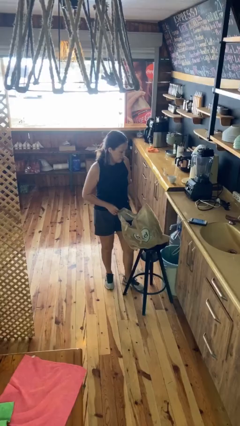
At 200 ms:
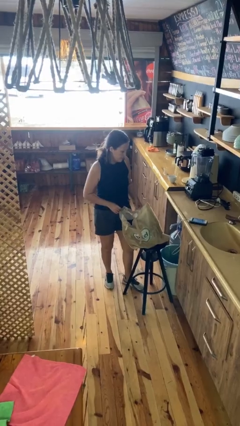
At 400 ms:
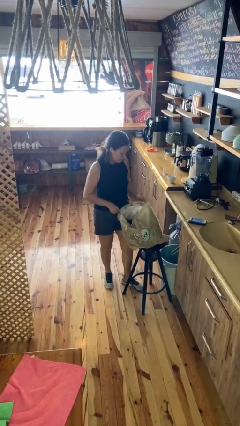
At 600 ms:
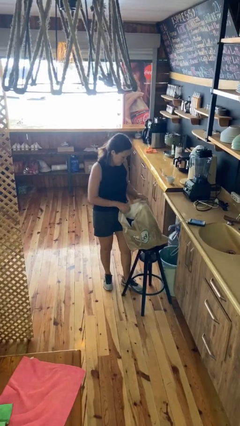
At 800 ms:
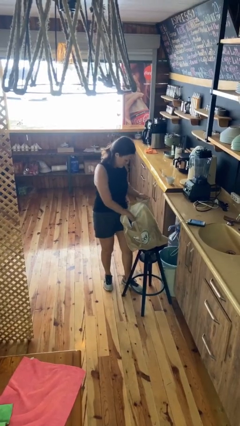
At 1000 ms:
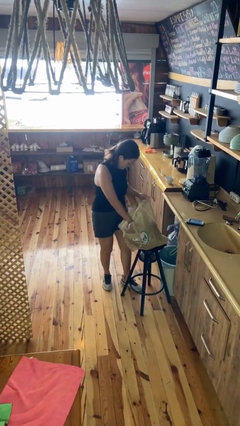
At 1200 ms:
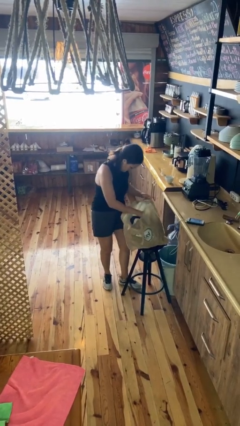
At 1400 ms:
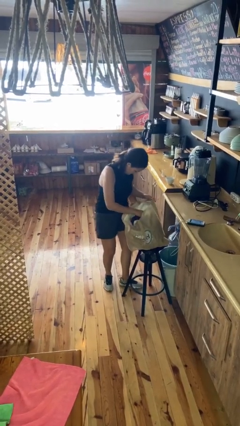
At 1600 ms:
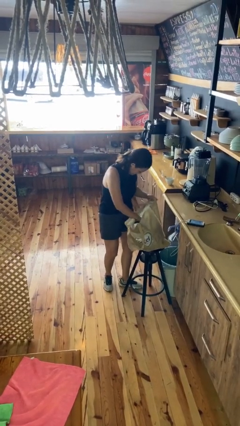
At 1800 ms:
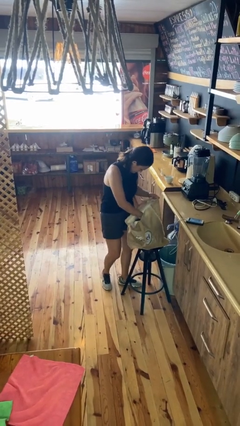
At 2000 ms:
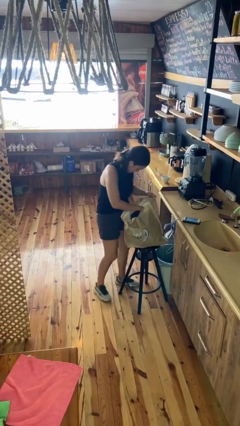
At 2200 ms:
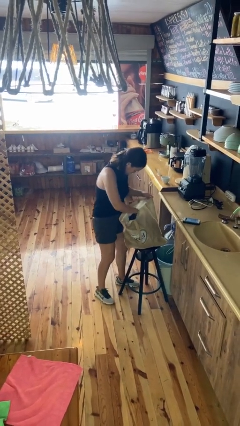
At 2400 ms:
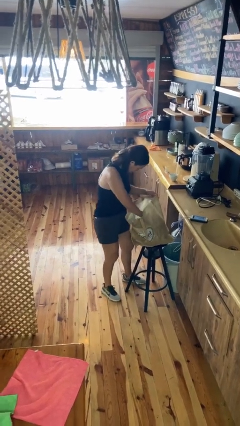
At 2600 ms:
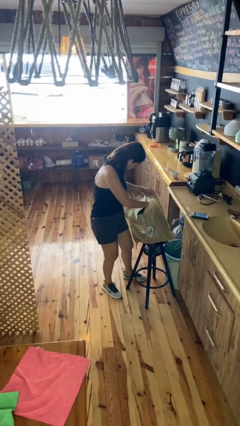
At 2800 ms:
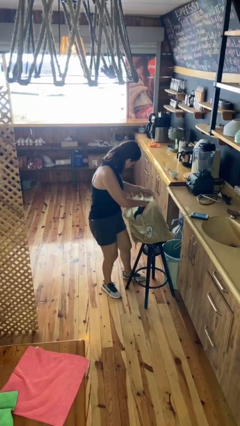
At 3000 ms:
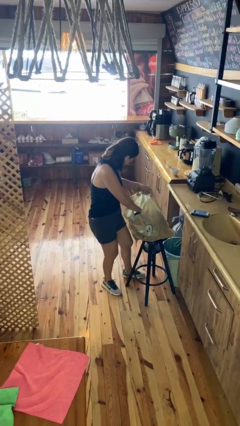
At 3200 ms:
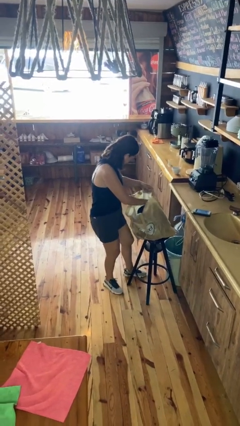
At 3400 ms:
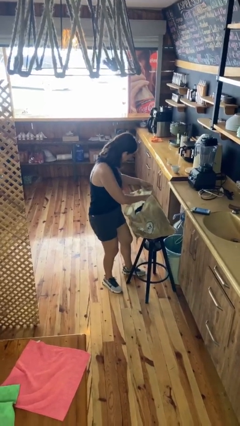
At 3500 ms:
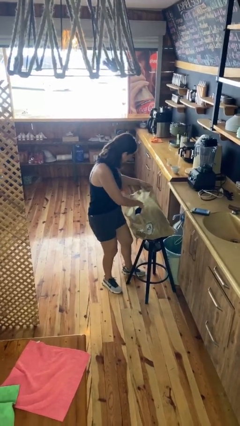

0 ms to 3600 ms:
person searches in bag

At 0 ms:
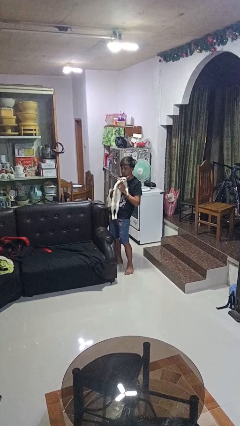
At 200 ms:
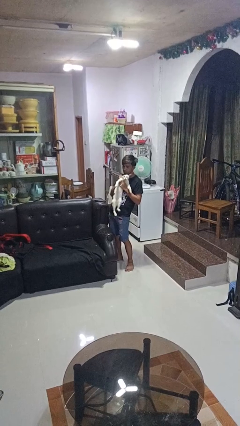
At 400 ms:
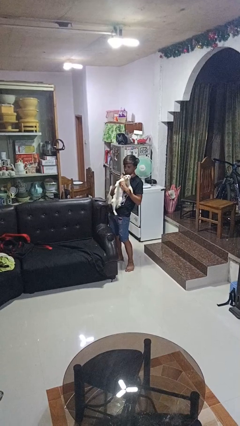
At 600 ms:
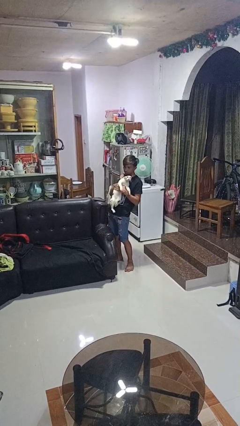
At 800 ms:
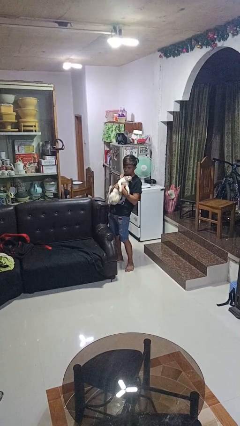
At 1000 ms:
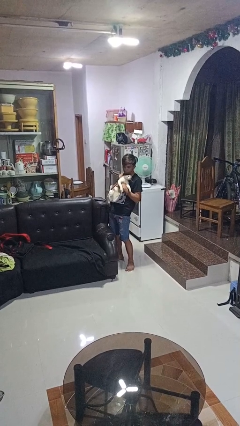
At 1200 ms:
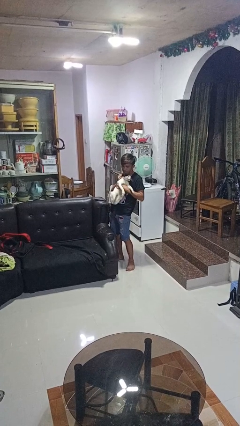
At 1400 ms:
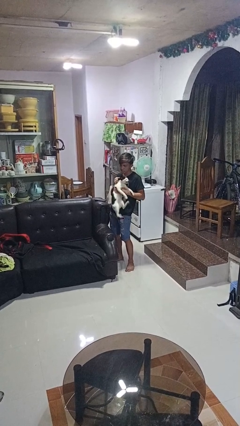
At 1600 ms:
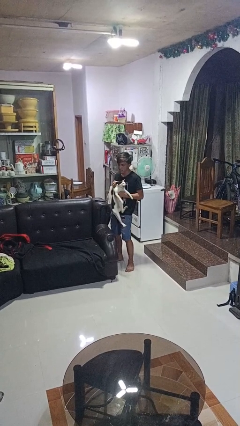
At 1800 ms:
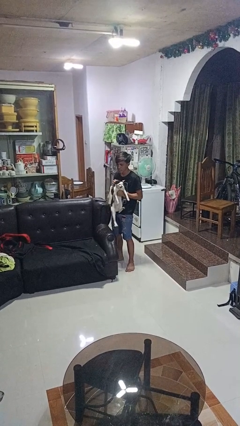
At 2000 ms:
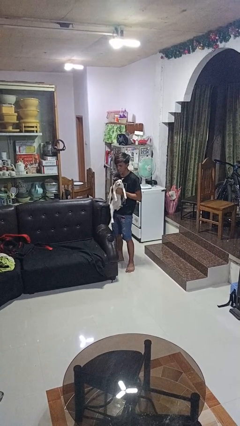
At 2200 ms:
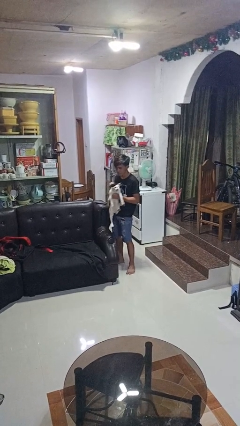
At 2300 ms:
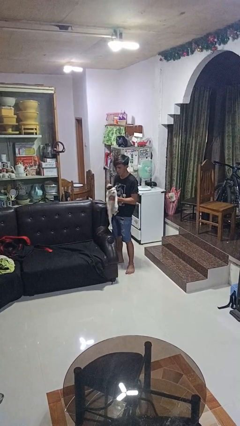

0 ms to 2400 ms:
person hugs cat

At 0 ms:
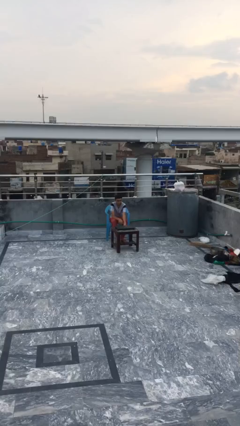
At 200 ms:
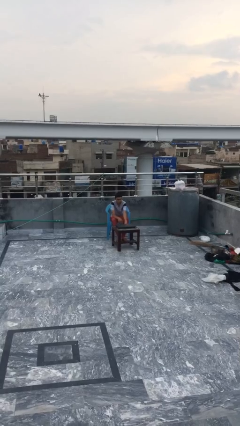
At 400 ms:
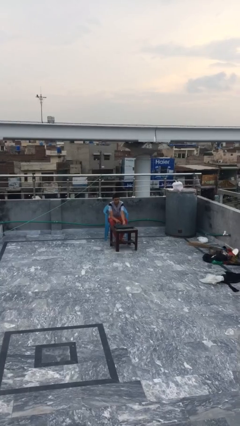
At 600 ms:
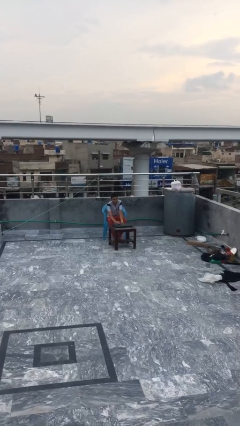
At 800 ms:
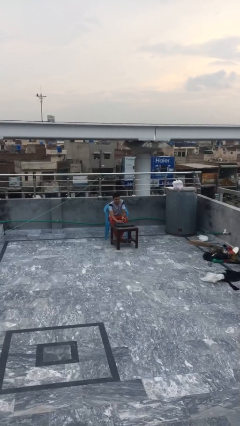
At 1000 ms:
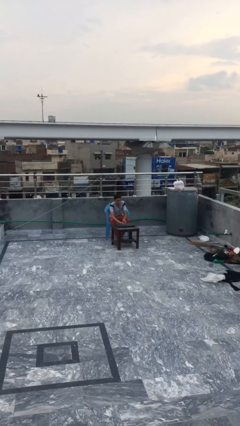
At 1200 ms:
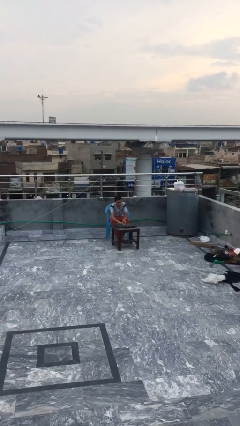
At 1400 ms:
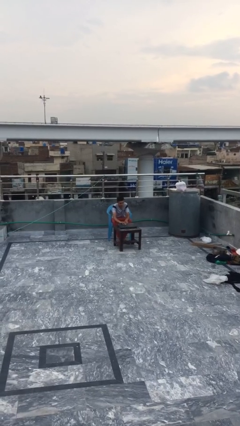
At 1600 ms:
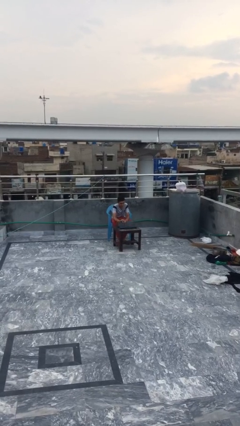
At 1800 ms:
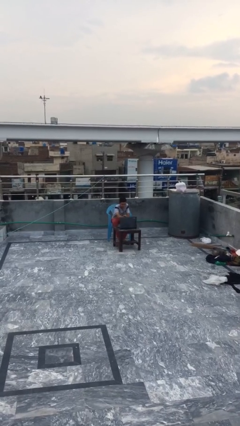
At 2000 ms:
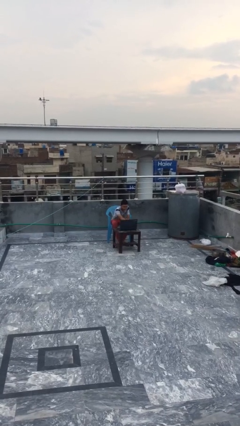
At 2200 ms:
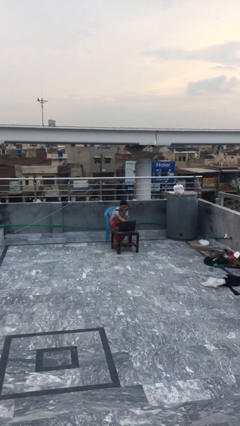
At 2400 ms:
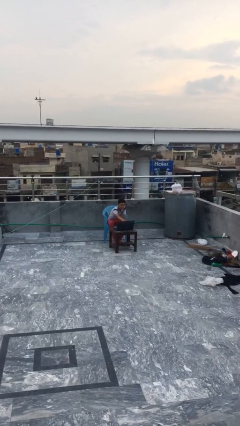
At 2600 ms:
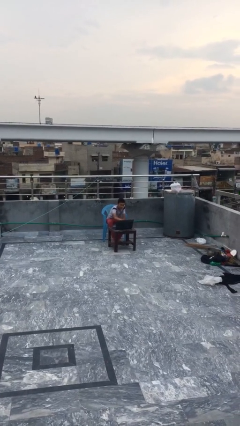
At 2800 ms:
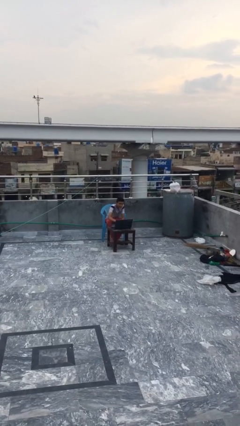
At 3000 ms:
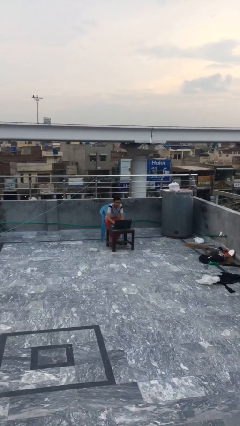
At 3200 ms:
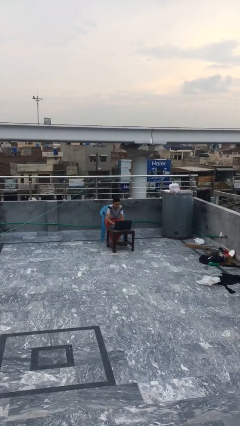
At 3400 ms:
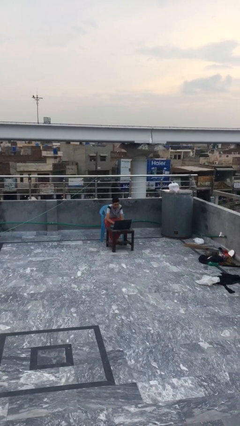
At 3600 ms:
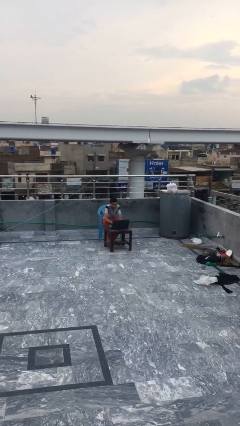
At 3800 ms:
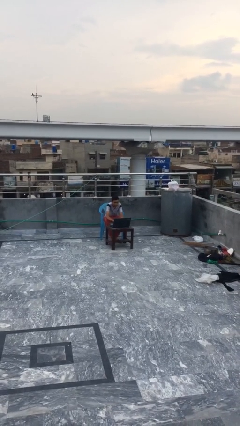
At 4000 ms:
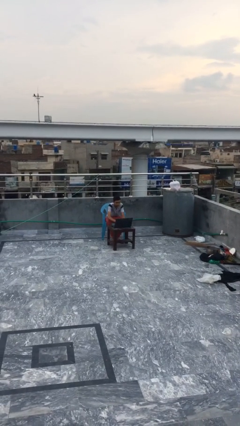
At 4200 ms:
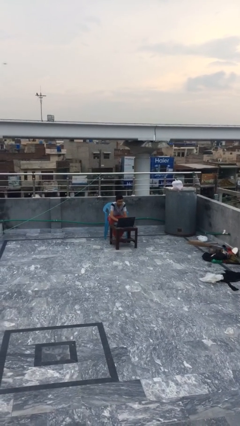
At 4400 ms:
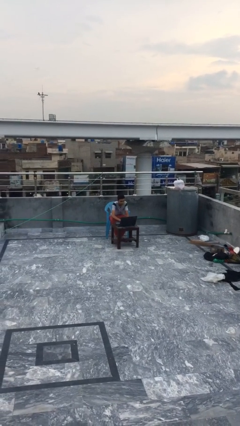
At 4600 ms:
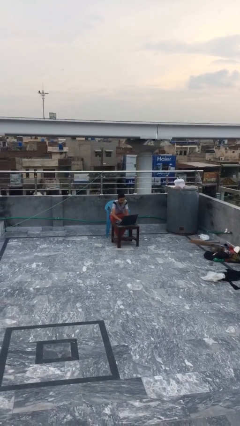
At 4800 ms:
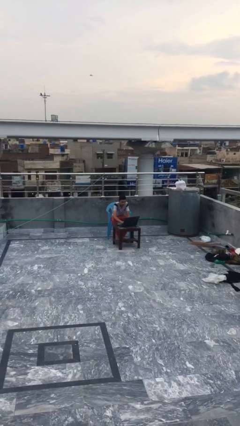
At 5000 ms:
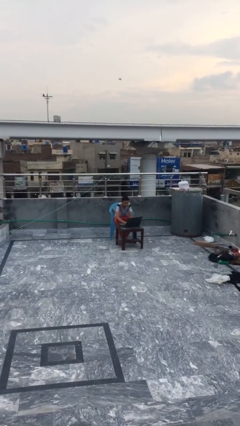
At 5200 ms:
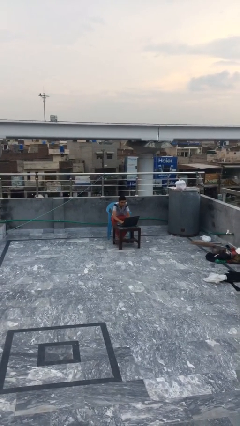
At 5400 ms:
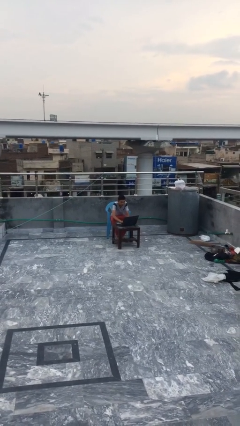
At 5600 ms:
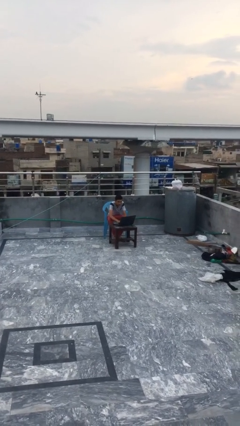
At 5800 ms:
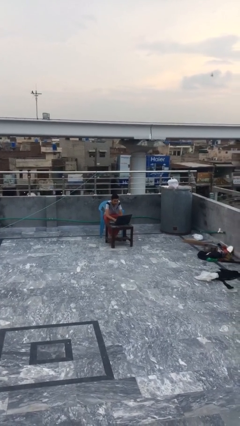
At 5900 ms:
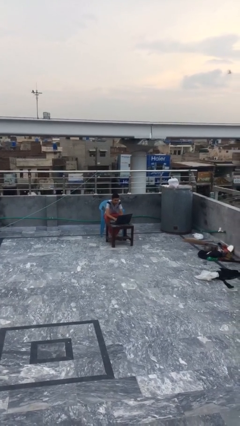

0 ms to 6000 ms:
person interacts with laptop

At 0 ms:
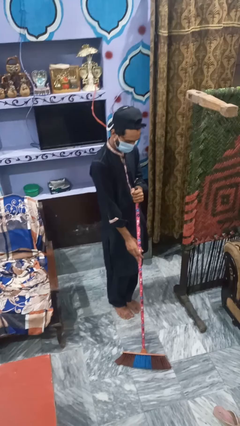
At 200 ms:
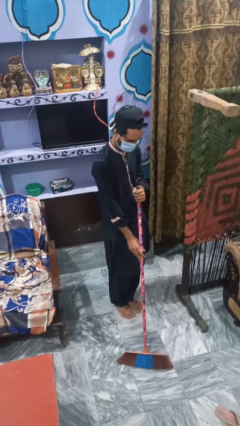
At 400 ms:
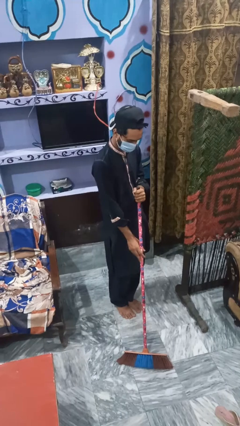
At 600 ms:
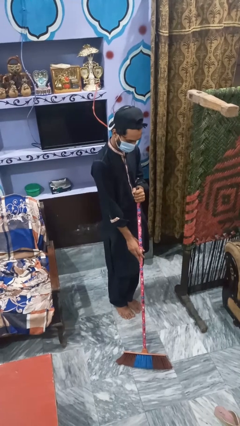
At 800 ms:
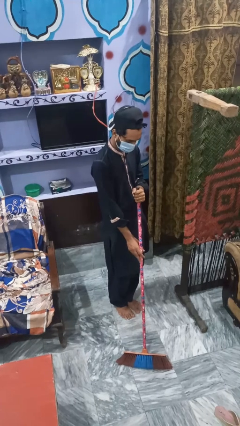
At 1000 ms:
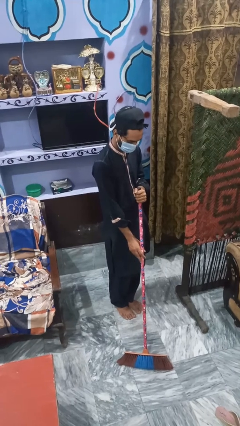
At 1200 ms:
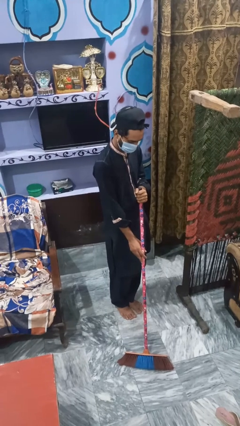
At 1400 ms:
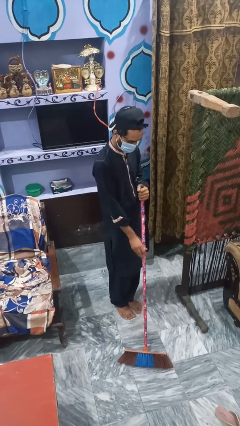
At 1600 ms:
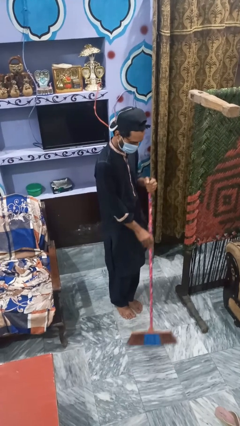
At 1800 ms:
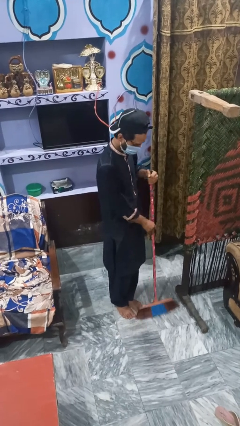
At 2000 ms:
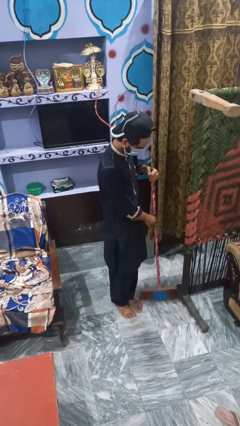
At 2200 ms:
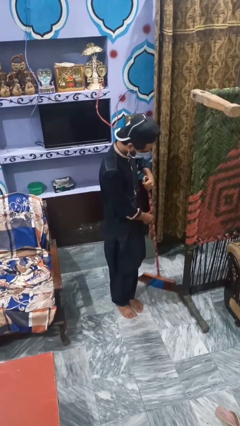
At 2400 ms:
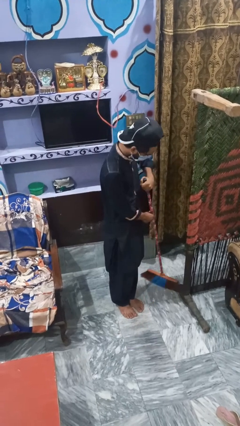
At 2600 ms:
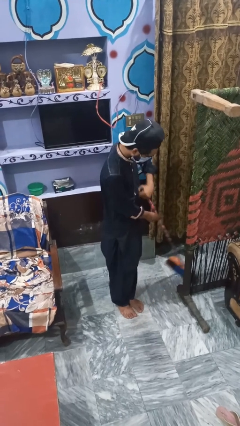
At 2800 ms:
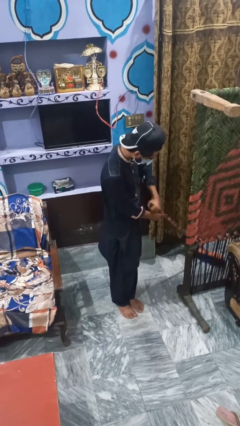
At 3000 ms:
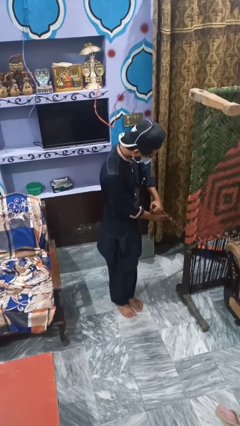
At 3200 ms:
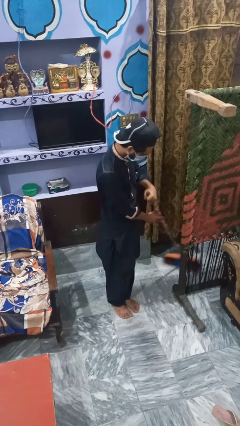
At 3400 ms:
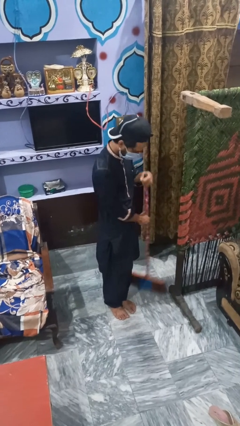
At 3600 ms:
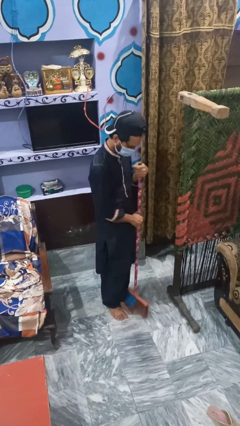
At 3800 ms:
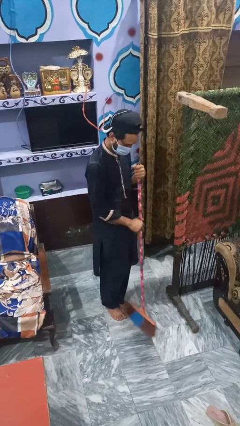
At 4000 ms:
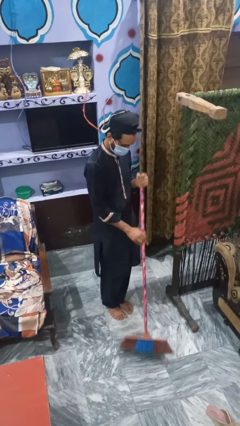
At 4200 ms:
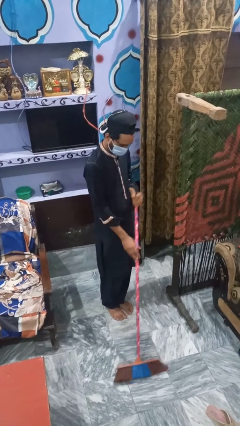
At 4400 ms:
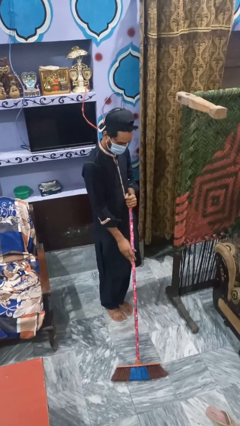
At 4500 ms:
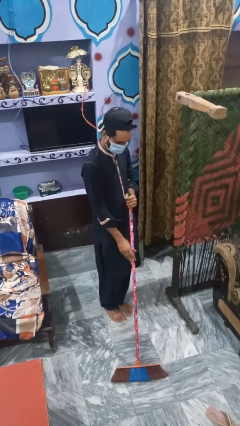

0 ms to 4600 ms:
person mops

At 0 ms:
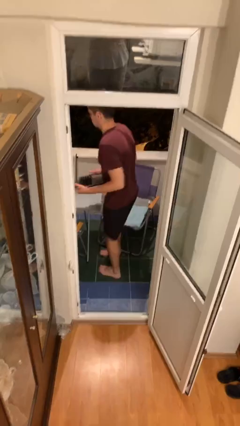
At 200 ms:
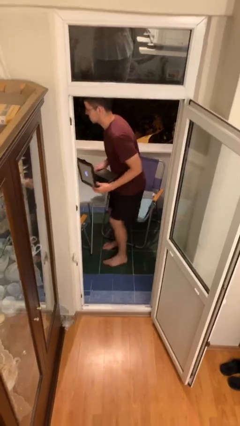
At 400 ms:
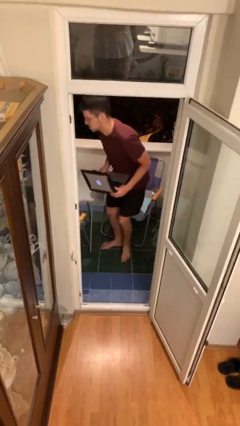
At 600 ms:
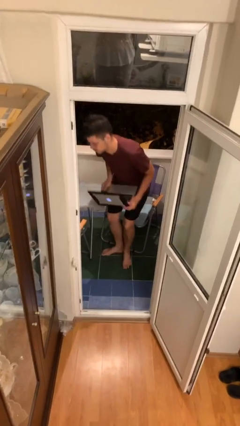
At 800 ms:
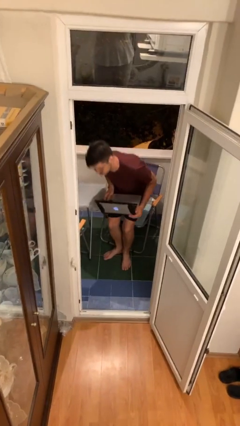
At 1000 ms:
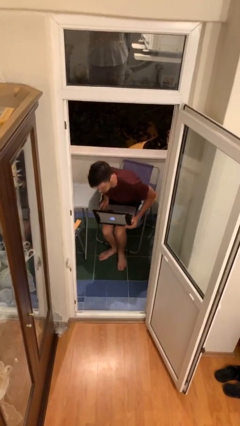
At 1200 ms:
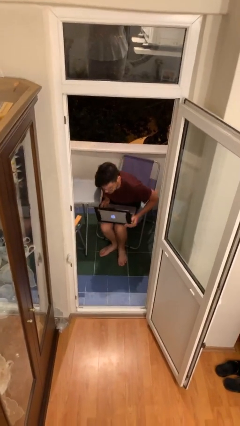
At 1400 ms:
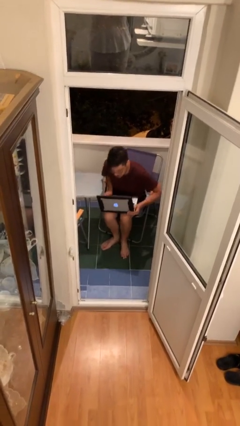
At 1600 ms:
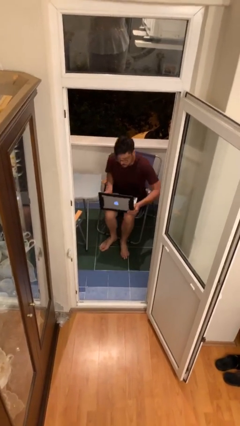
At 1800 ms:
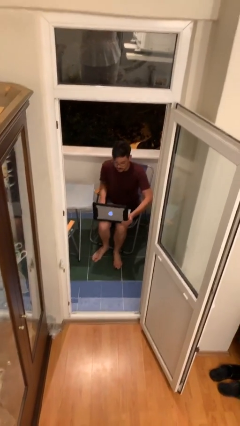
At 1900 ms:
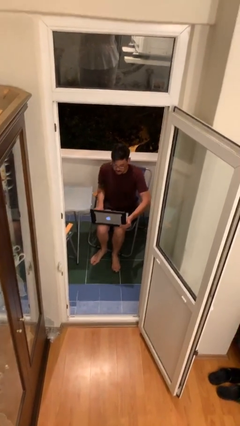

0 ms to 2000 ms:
person sits down
